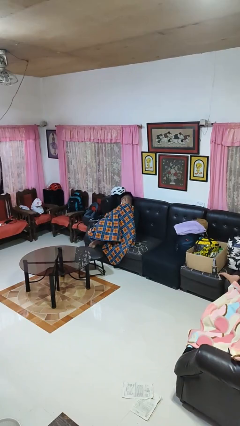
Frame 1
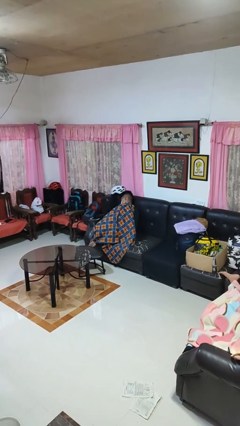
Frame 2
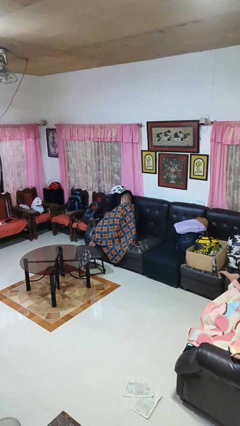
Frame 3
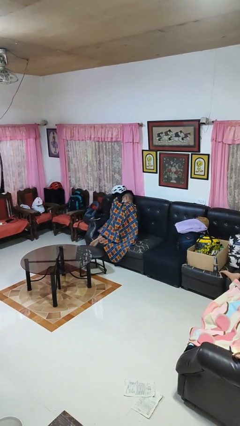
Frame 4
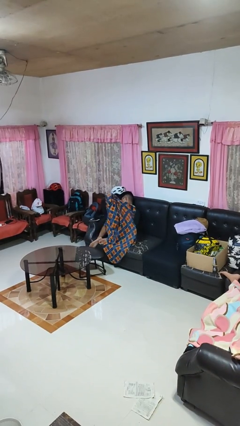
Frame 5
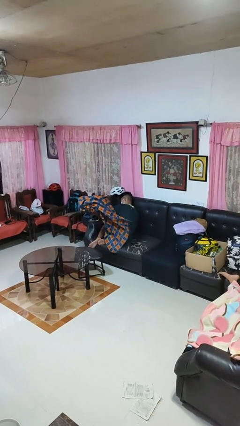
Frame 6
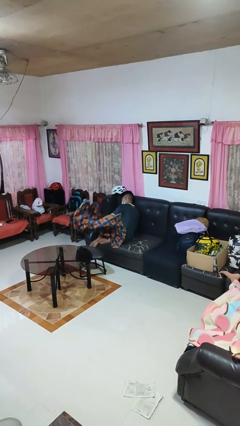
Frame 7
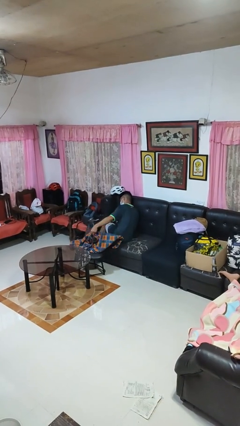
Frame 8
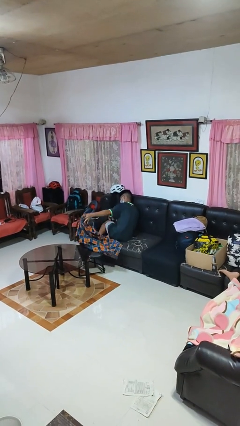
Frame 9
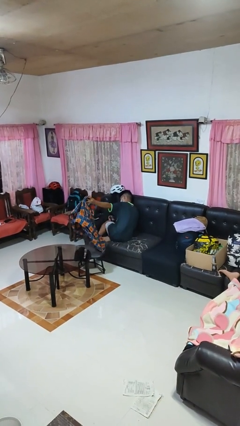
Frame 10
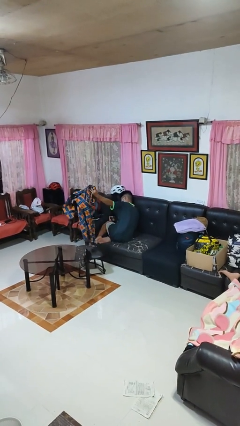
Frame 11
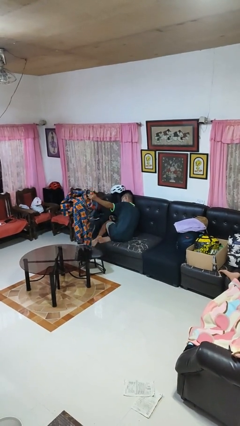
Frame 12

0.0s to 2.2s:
person uncovers with blanket

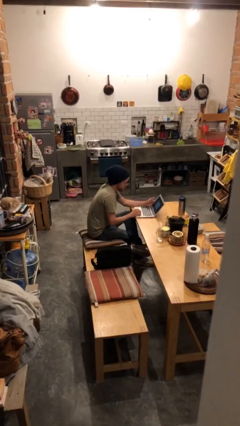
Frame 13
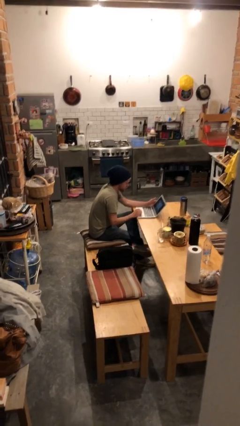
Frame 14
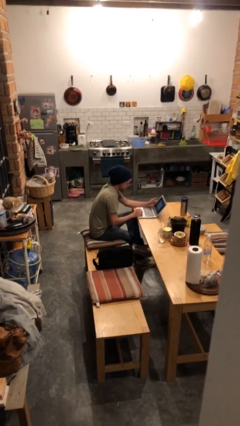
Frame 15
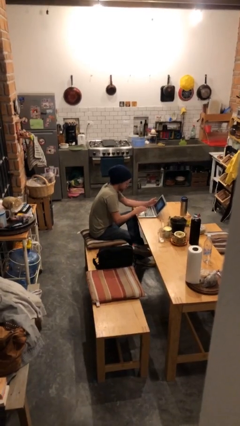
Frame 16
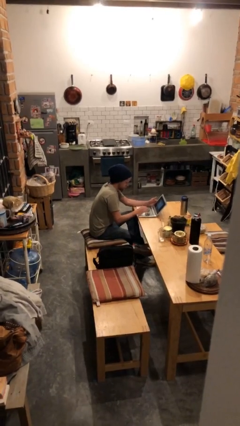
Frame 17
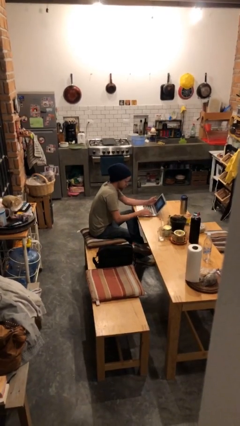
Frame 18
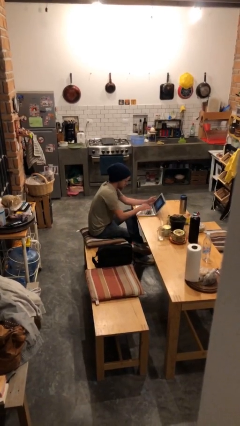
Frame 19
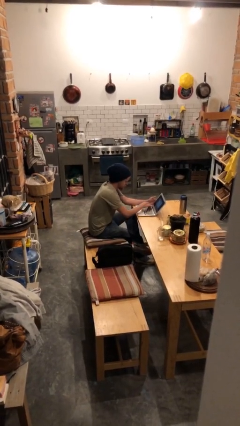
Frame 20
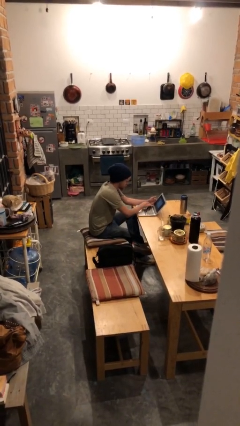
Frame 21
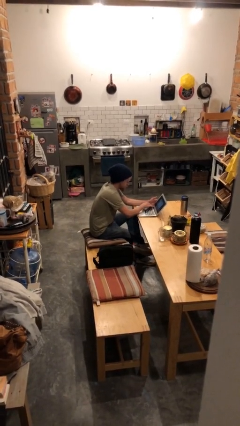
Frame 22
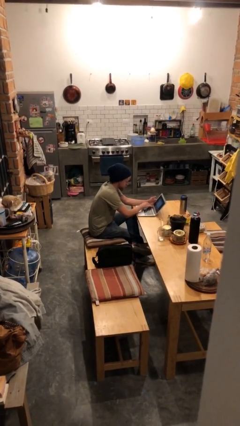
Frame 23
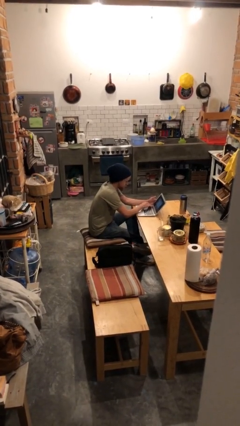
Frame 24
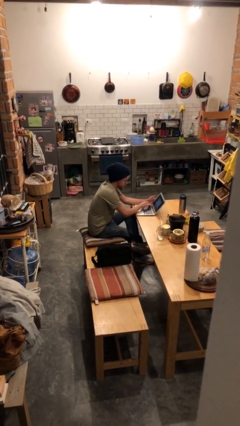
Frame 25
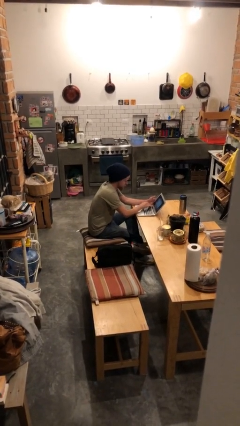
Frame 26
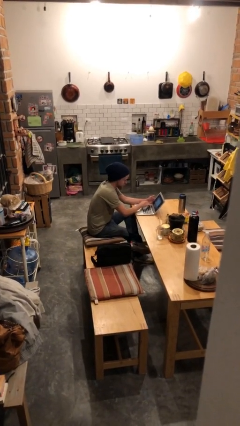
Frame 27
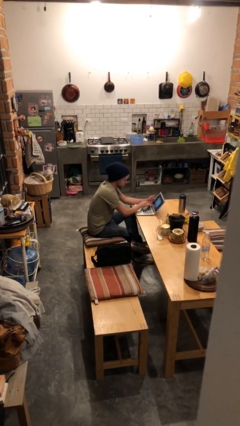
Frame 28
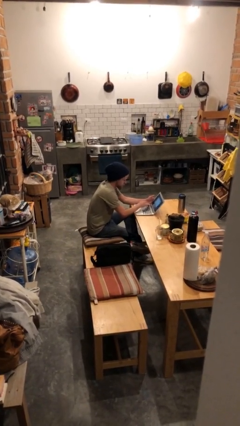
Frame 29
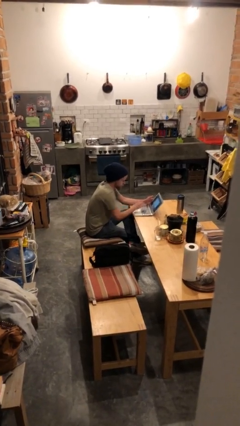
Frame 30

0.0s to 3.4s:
person interacts with laptop

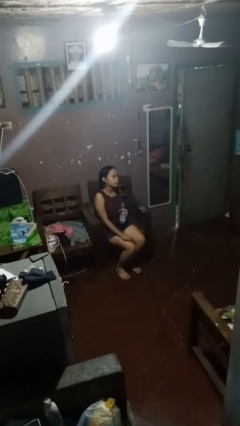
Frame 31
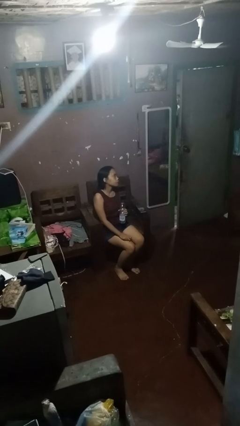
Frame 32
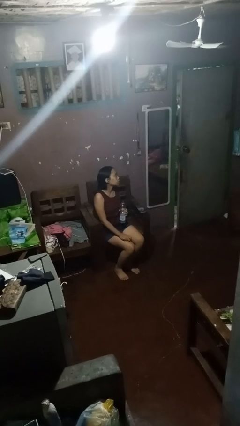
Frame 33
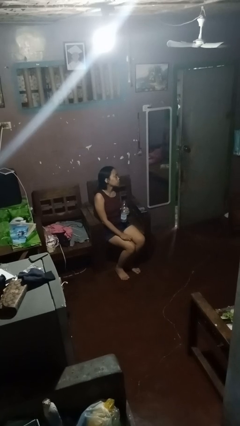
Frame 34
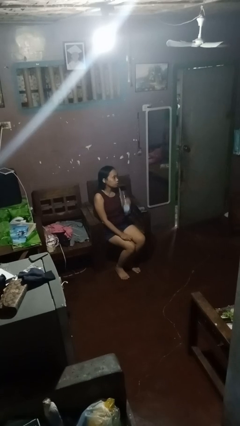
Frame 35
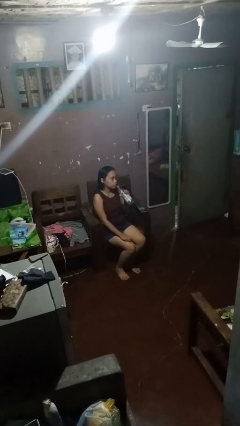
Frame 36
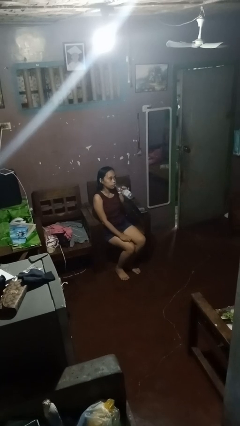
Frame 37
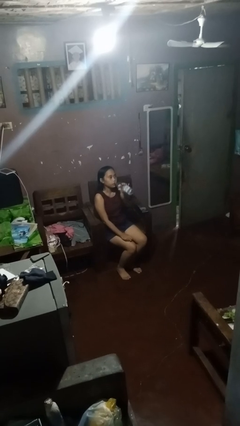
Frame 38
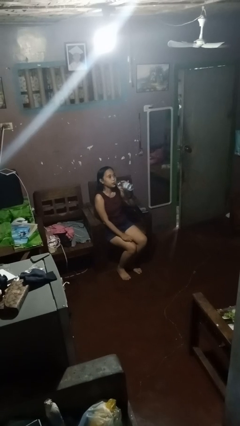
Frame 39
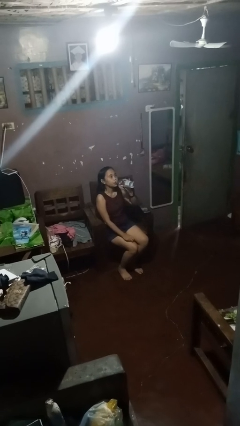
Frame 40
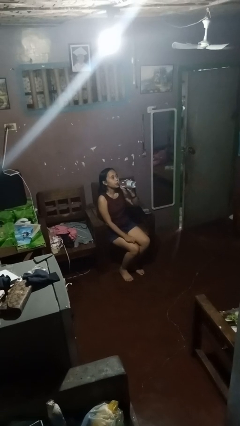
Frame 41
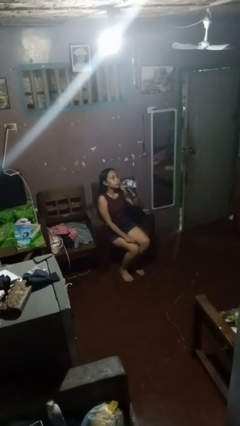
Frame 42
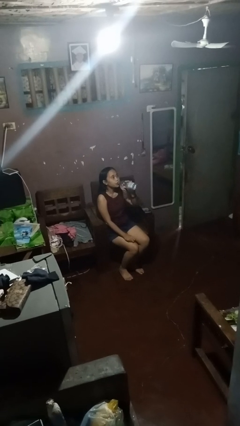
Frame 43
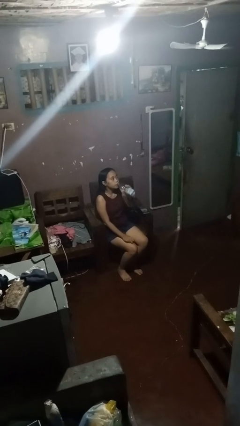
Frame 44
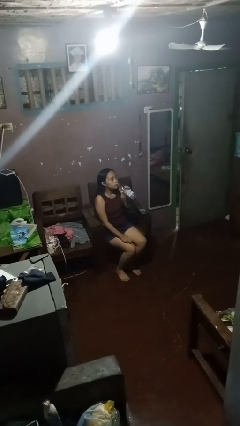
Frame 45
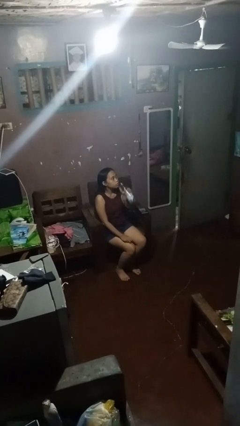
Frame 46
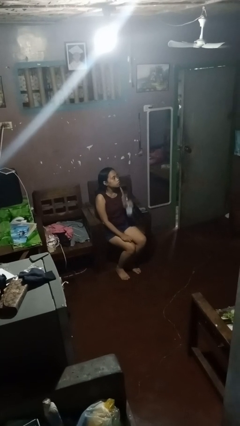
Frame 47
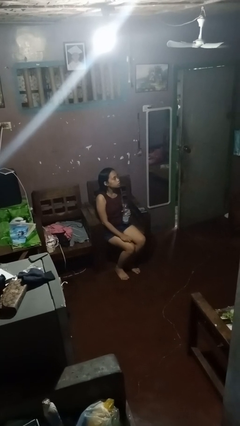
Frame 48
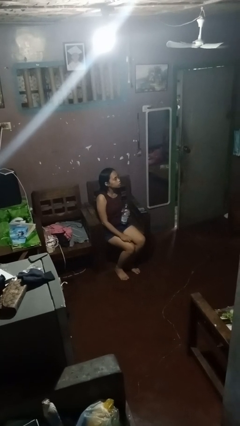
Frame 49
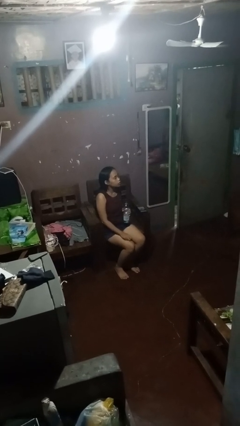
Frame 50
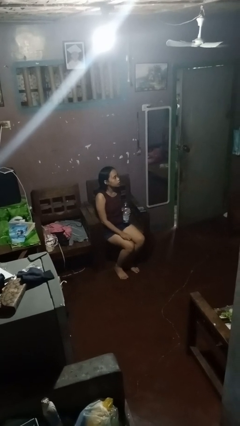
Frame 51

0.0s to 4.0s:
person drinks from bottle

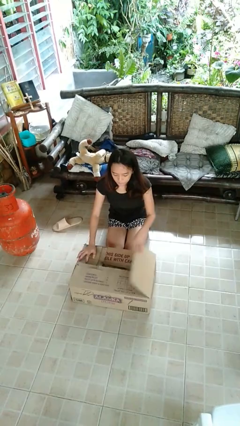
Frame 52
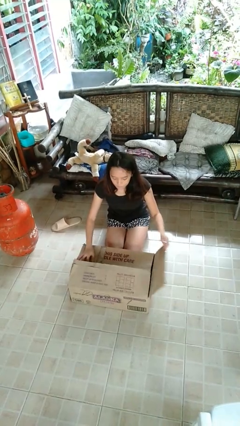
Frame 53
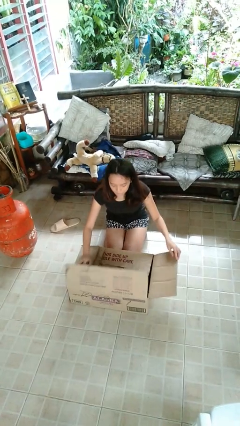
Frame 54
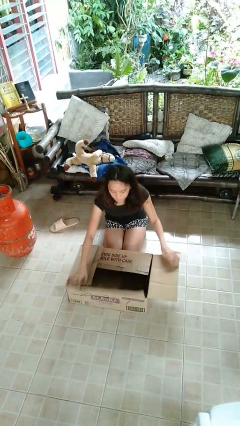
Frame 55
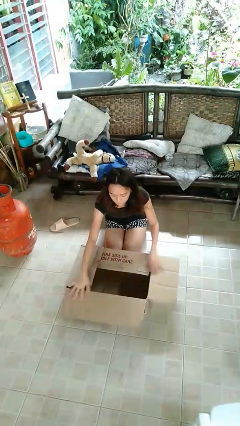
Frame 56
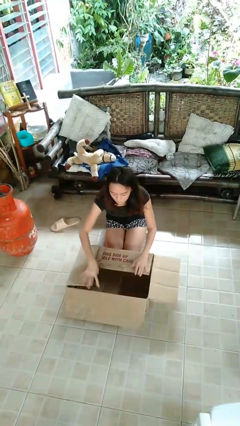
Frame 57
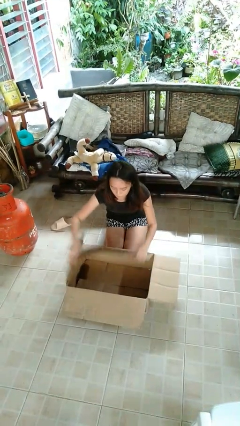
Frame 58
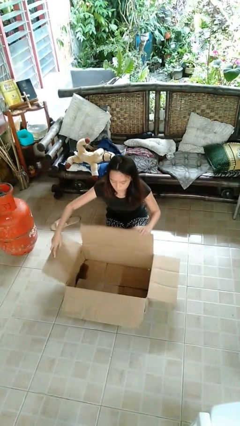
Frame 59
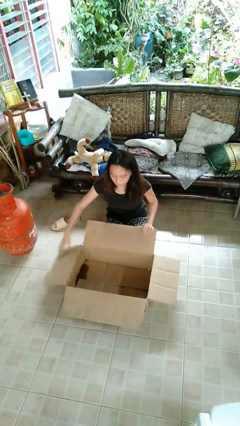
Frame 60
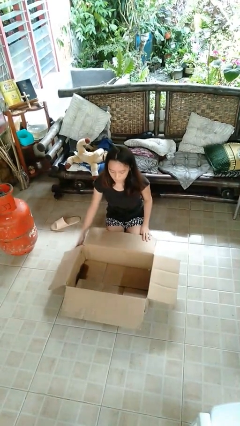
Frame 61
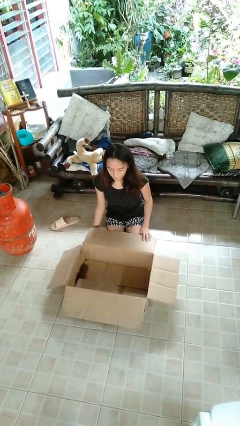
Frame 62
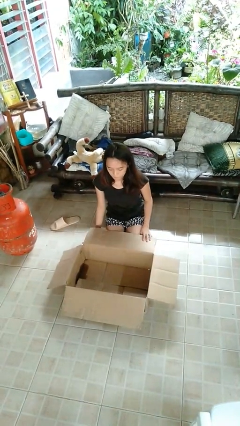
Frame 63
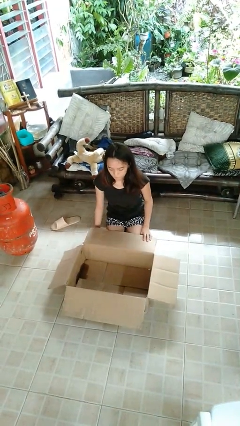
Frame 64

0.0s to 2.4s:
person opens box

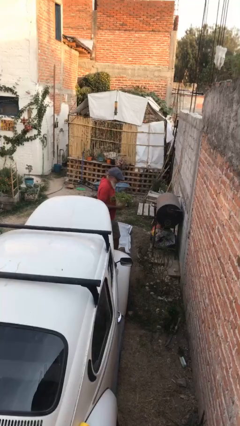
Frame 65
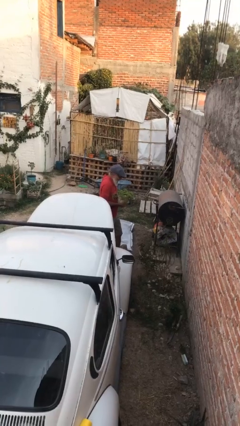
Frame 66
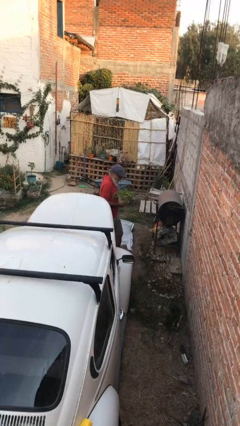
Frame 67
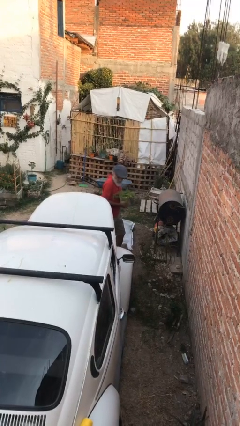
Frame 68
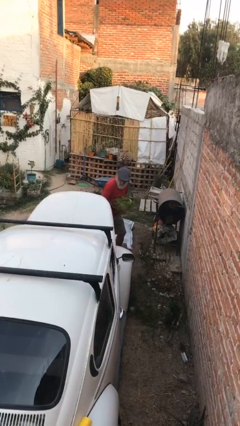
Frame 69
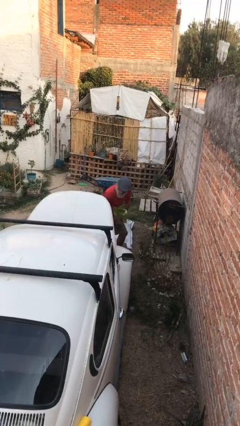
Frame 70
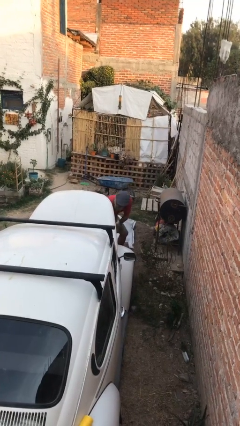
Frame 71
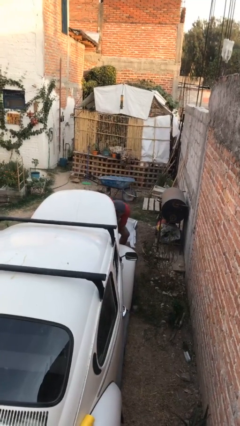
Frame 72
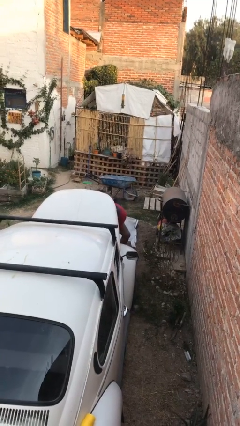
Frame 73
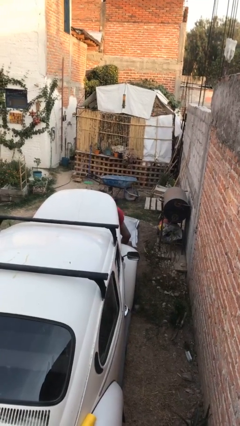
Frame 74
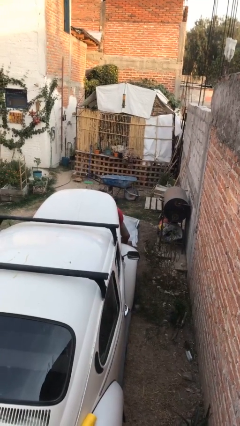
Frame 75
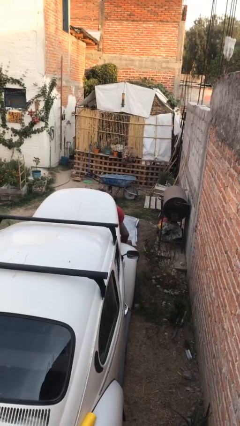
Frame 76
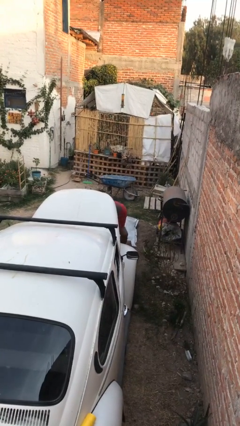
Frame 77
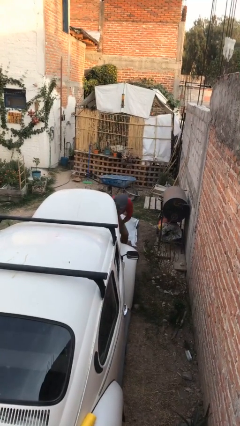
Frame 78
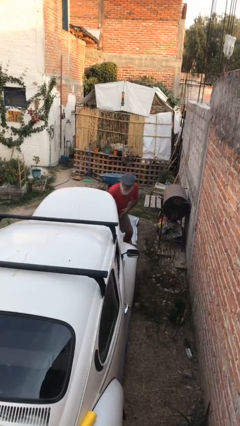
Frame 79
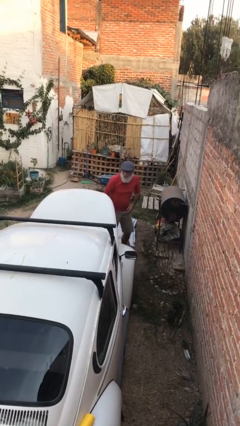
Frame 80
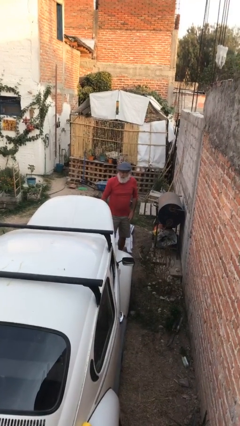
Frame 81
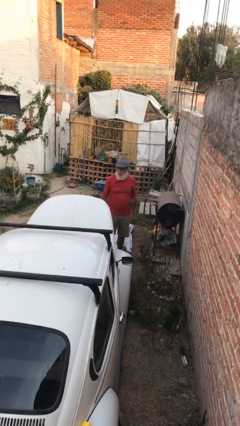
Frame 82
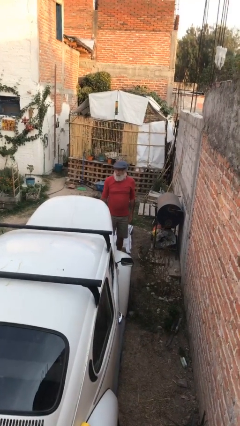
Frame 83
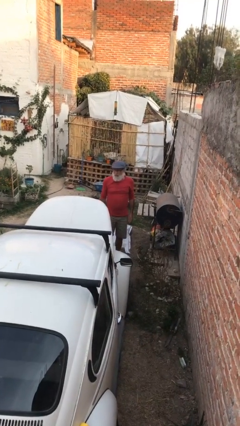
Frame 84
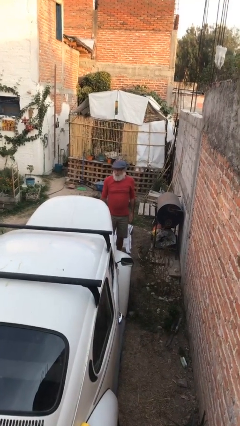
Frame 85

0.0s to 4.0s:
person loads car

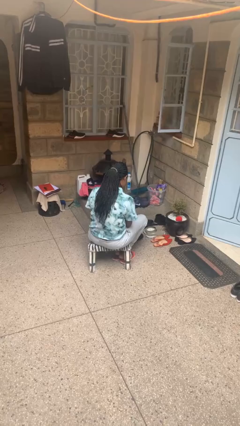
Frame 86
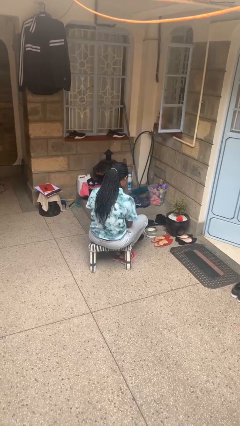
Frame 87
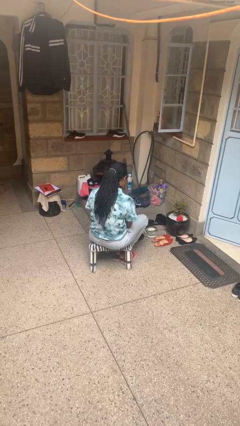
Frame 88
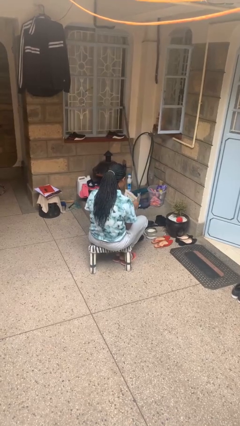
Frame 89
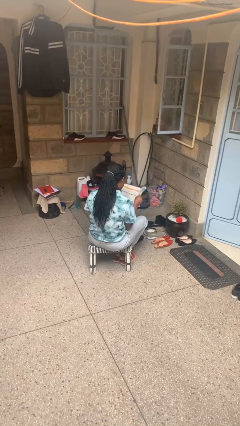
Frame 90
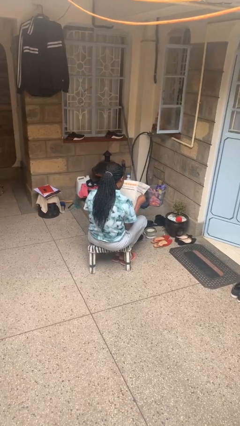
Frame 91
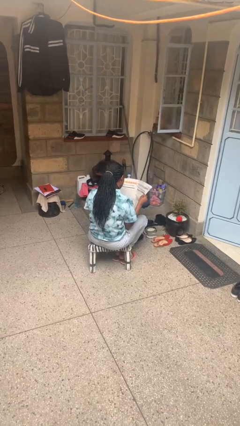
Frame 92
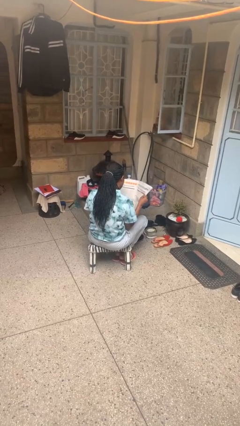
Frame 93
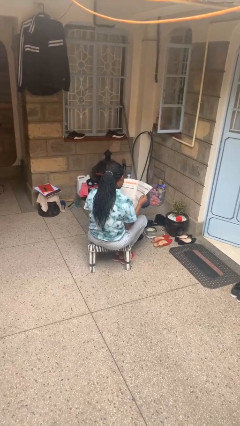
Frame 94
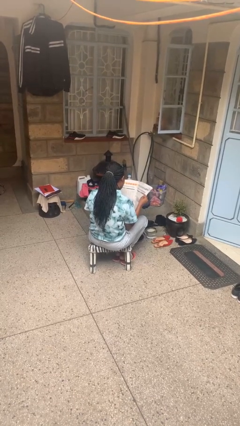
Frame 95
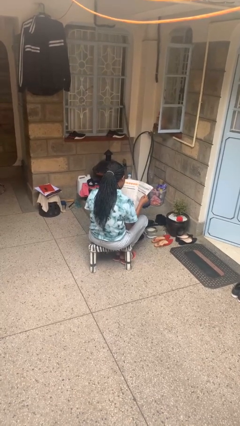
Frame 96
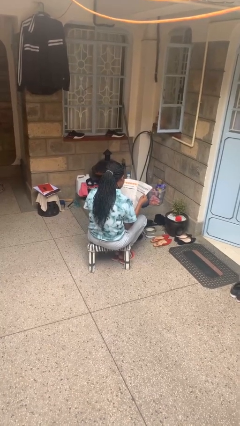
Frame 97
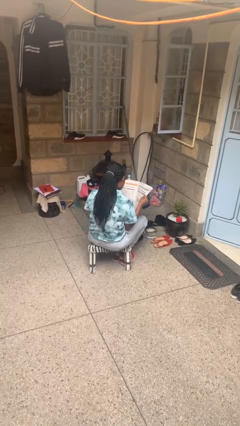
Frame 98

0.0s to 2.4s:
person reads newspaper
